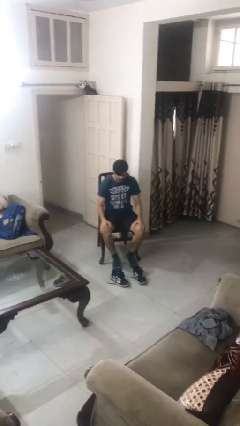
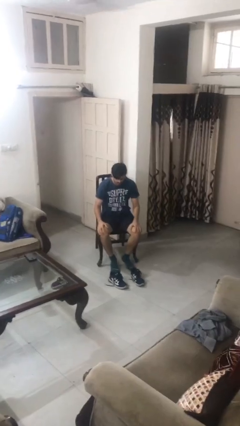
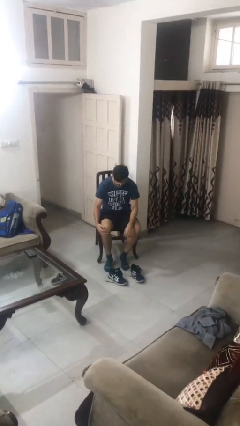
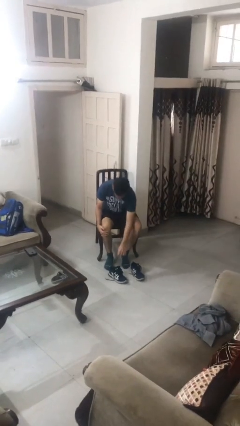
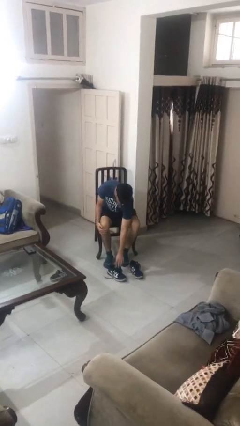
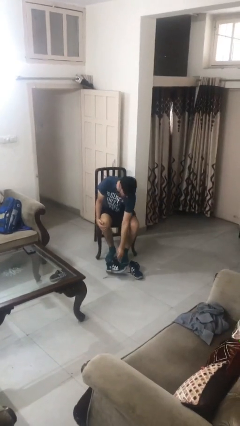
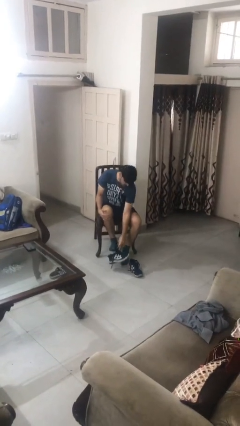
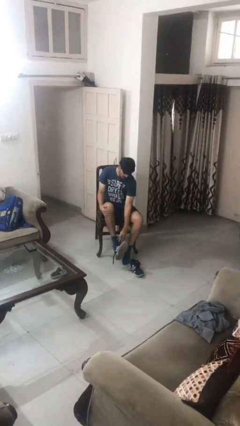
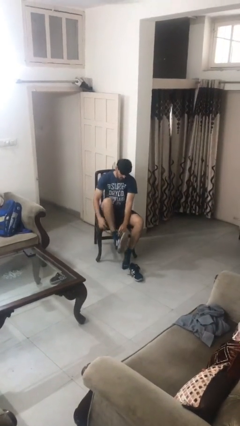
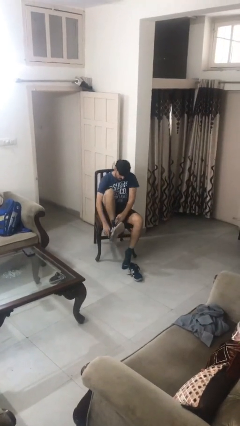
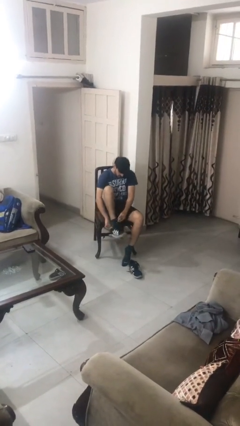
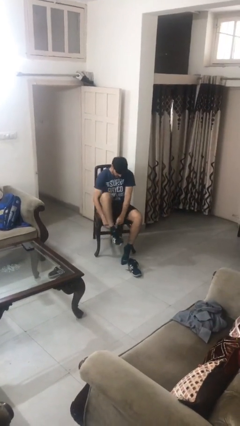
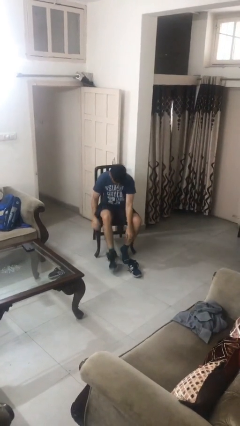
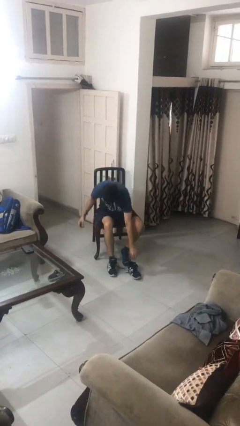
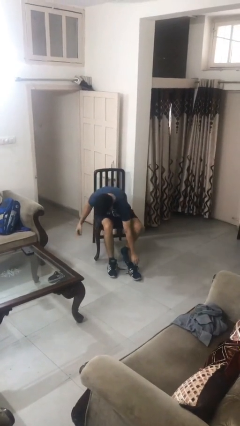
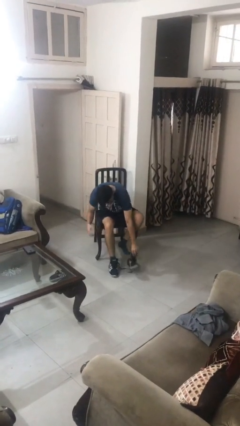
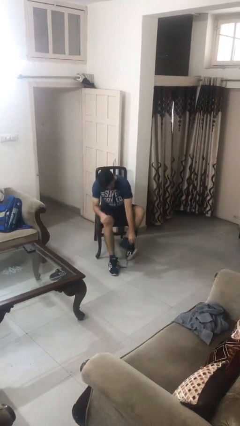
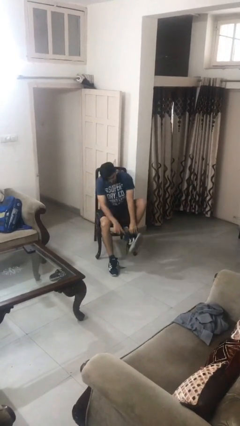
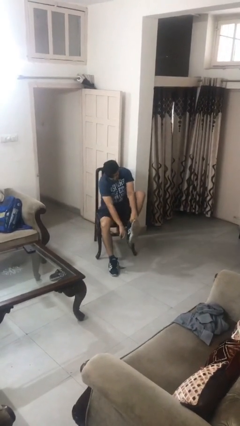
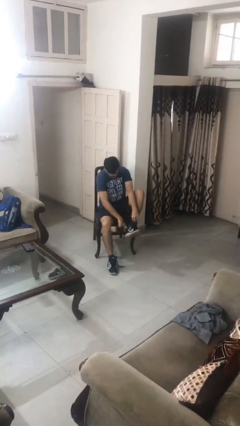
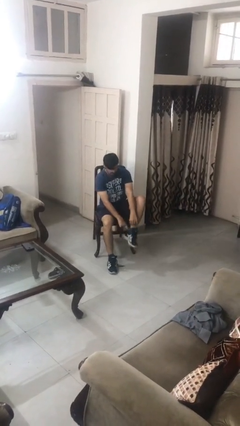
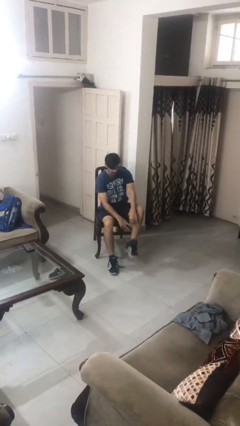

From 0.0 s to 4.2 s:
person puts on shoes

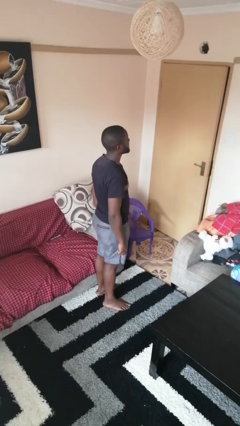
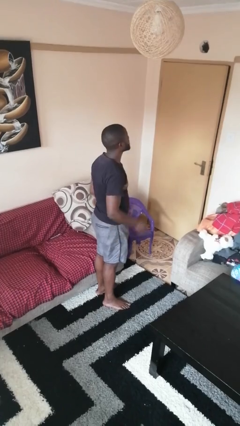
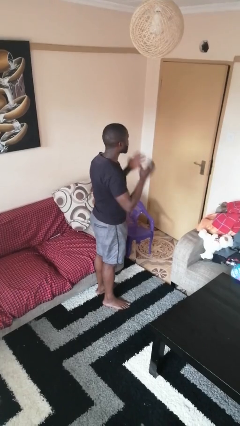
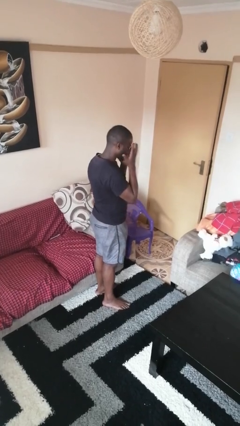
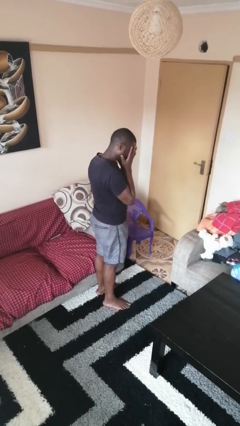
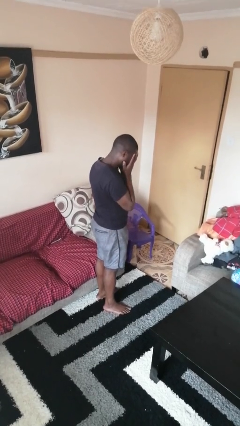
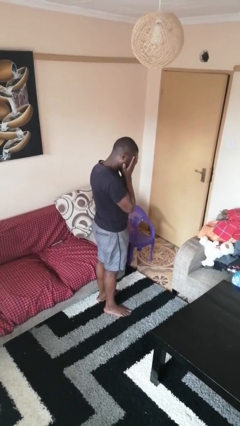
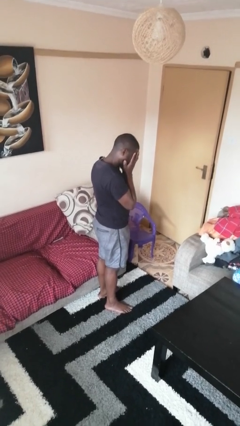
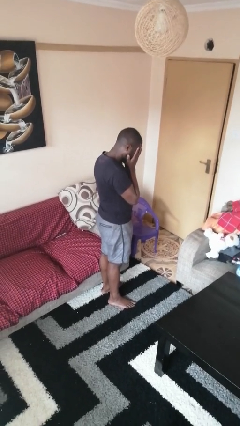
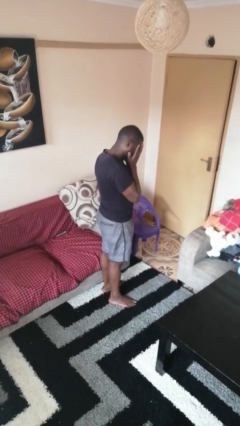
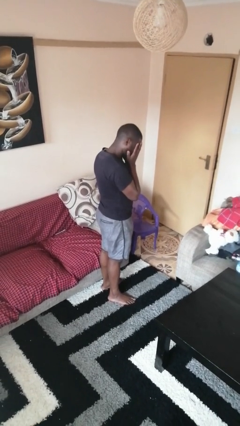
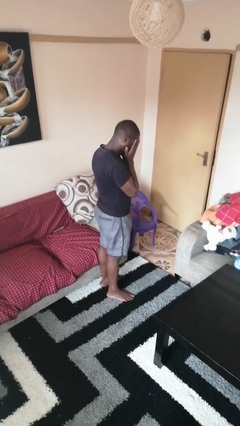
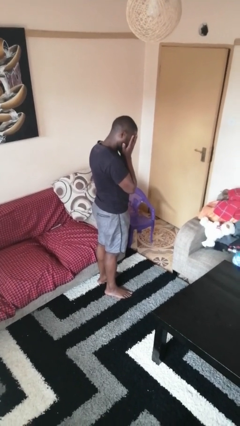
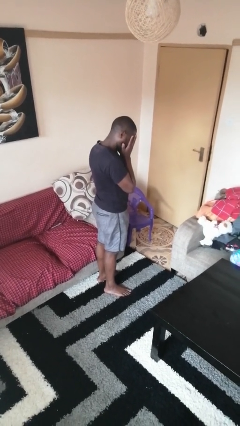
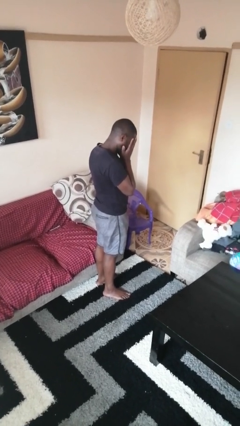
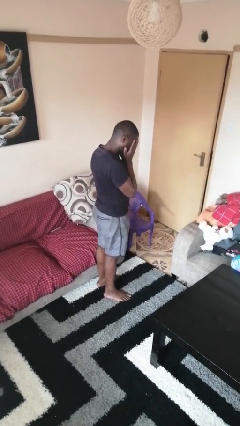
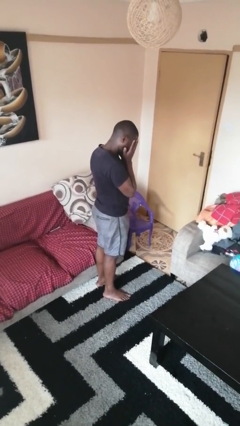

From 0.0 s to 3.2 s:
person covers face with hands

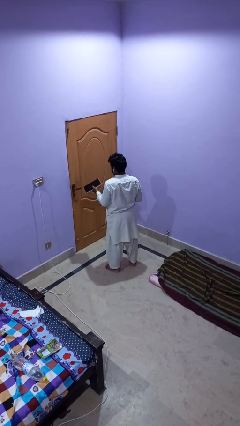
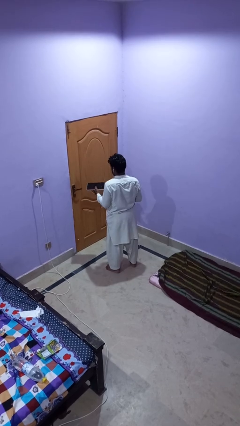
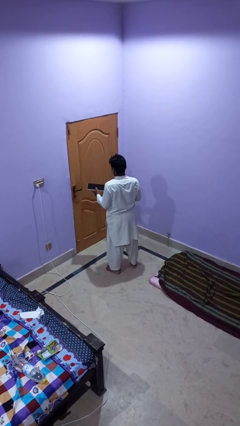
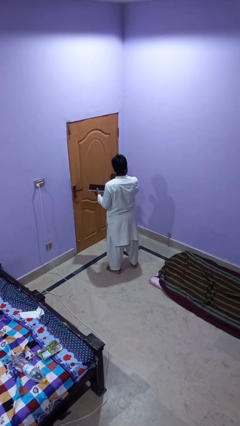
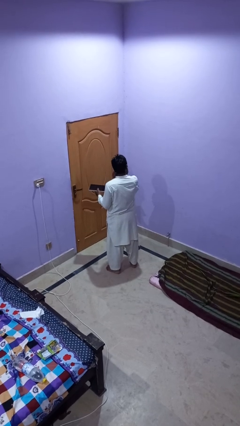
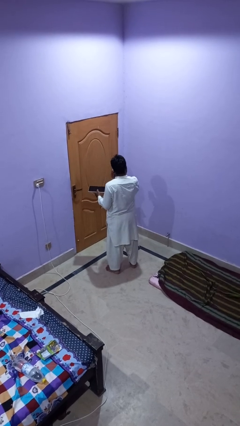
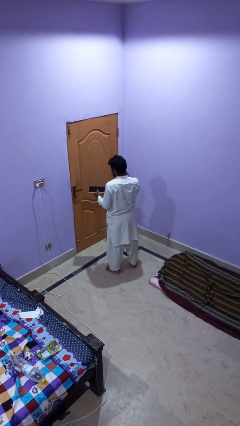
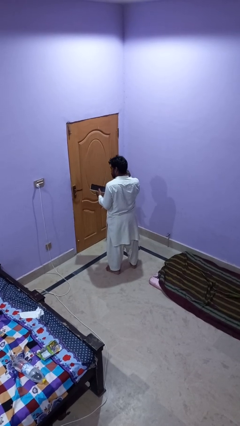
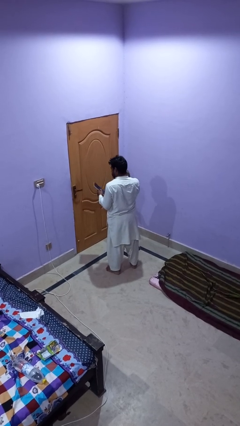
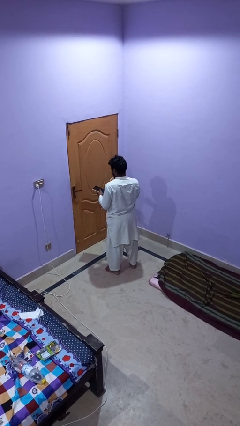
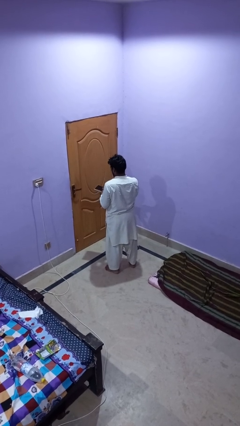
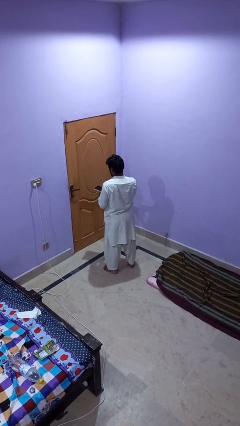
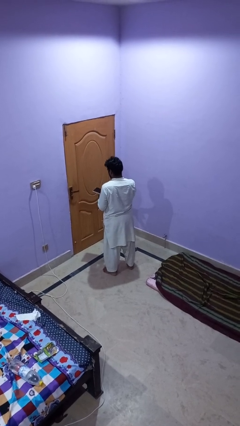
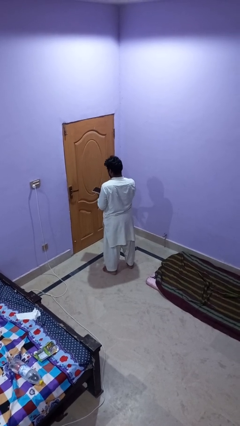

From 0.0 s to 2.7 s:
person takes off headphones

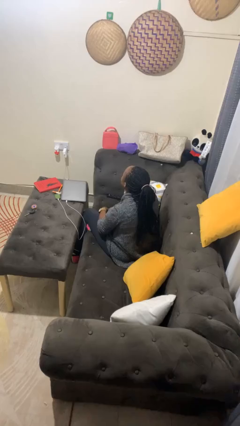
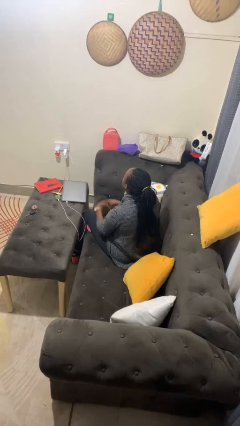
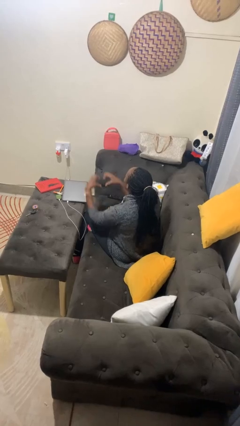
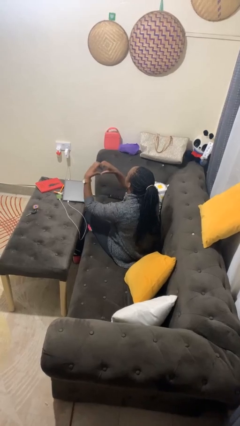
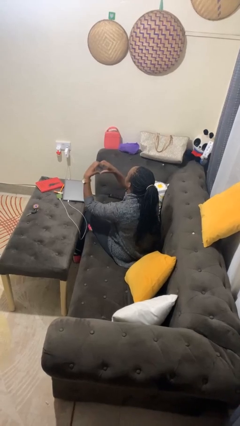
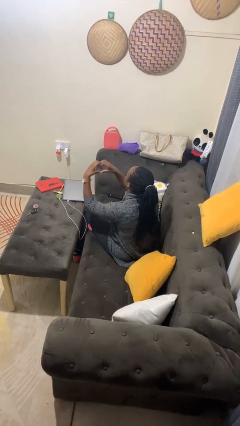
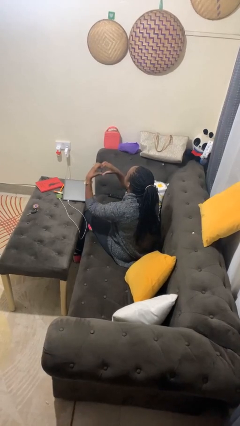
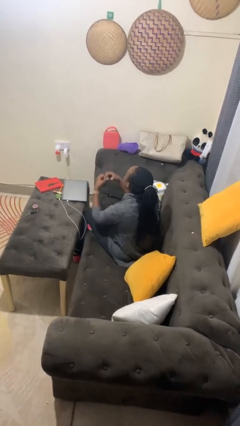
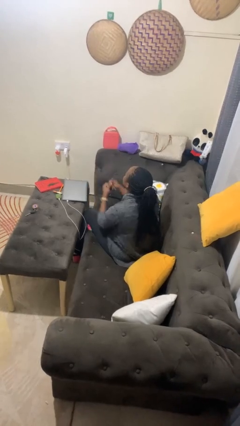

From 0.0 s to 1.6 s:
person gestures heart

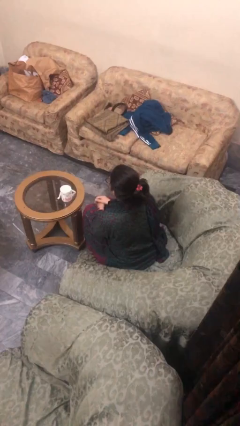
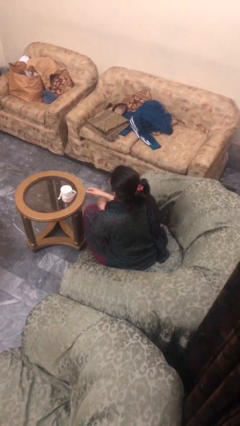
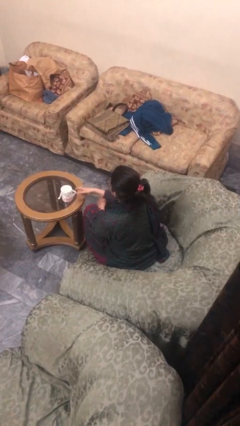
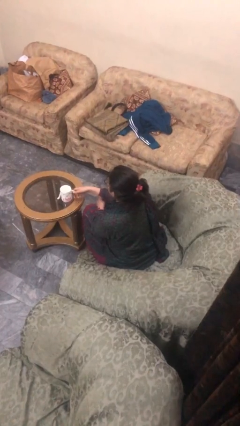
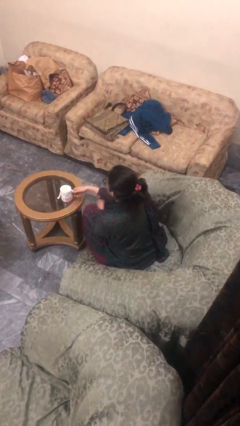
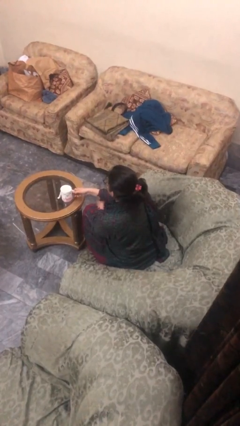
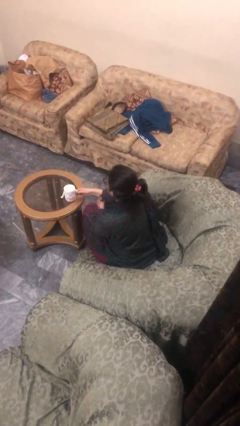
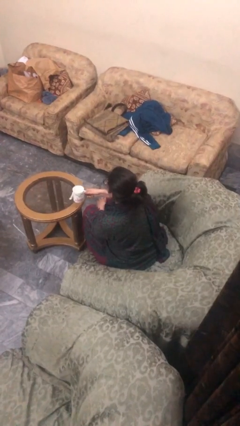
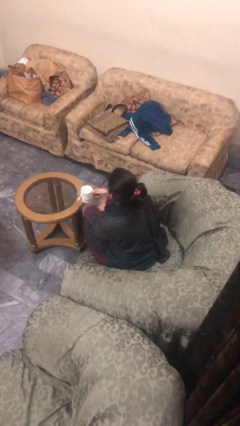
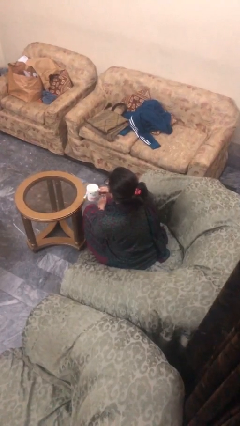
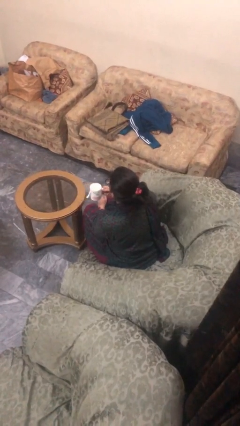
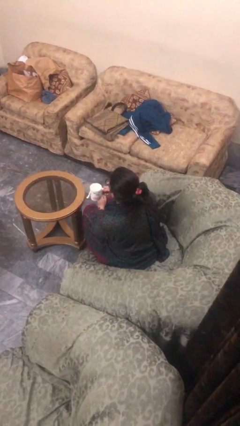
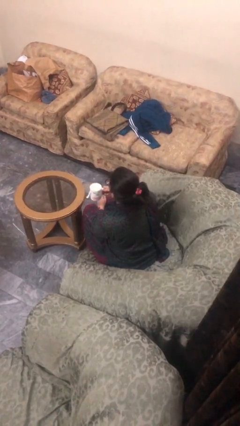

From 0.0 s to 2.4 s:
person picks up object from table

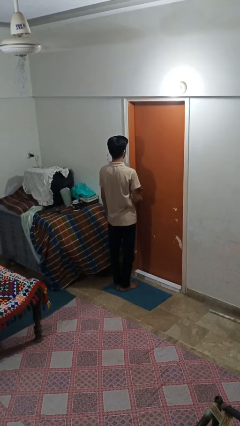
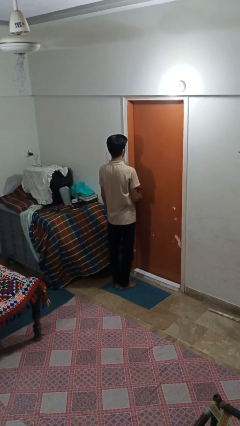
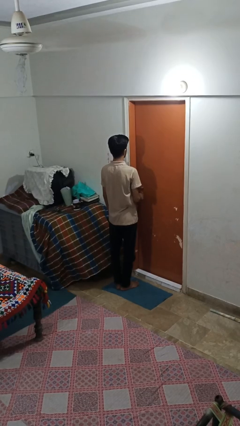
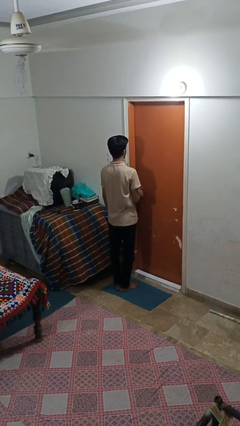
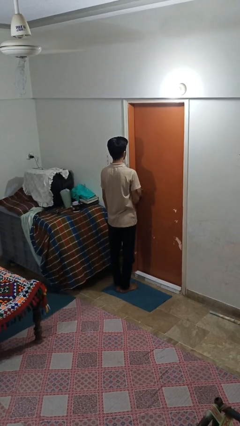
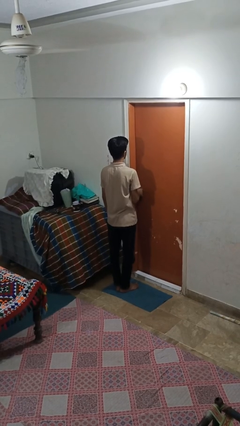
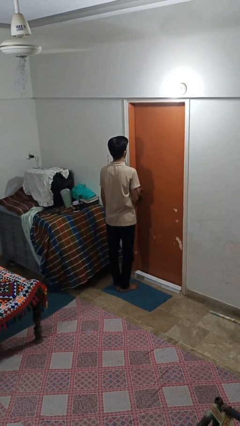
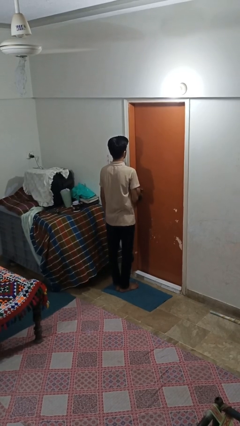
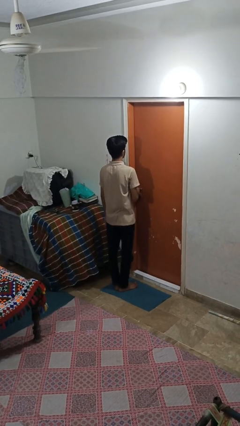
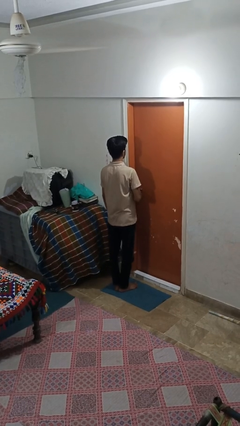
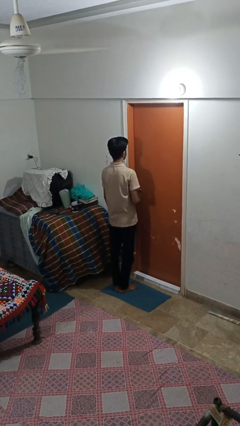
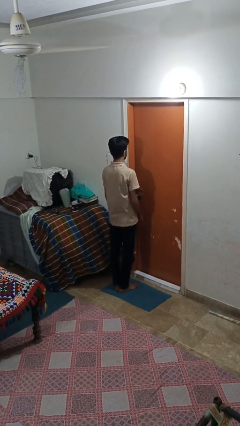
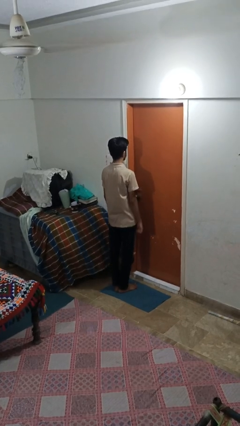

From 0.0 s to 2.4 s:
person locks door with keys

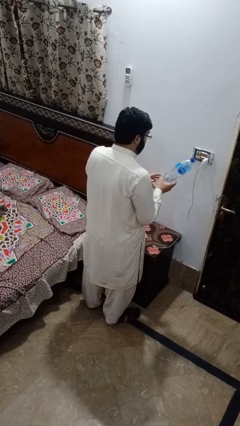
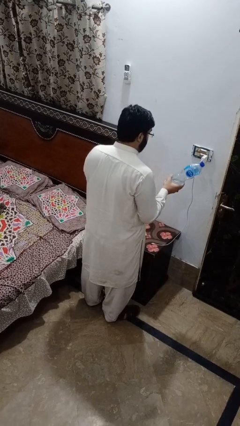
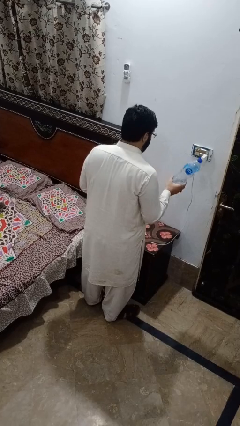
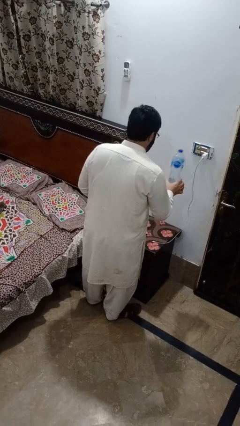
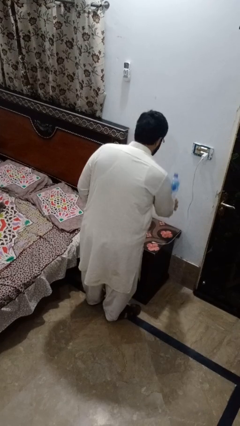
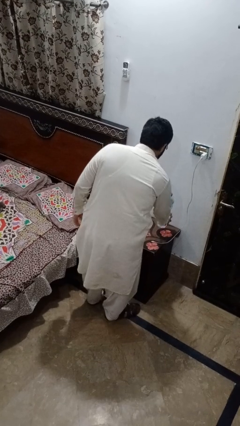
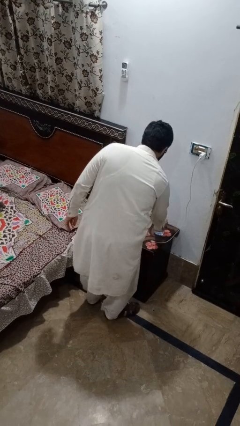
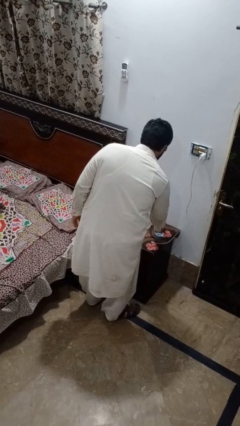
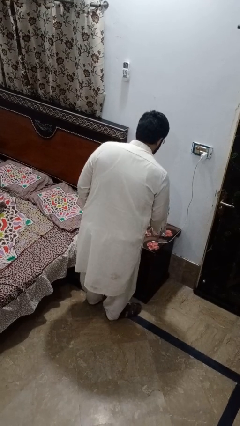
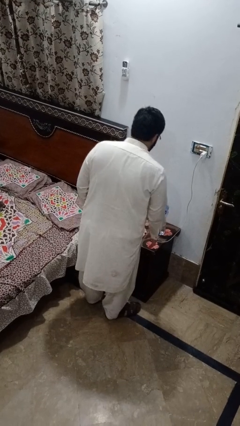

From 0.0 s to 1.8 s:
person puts down object on countertop
